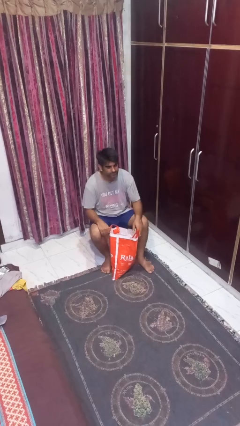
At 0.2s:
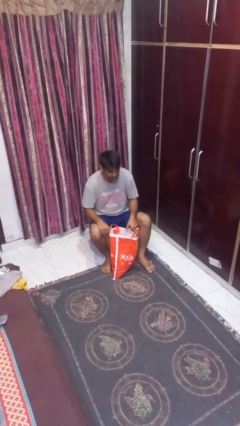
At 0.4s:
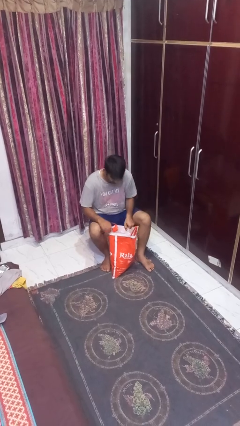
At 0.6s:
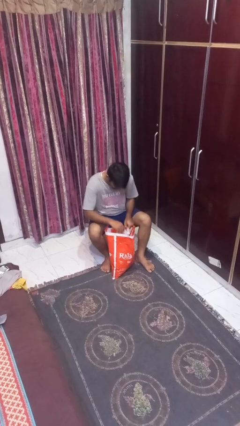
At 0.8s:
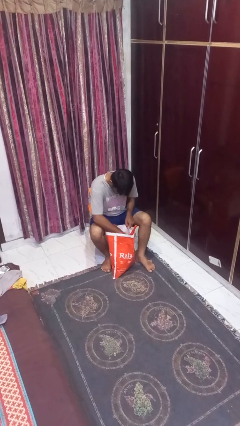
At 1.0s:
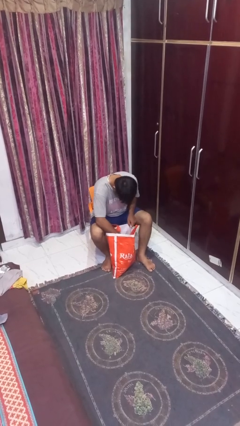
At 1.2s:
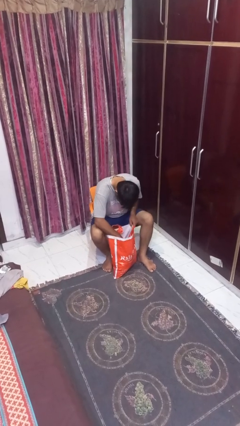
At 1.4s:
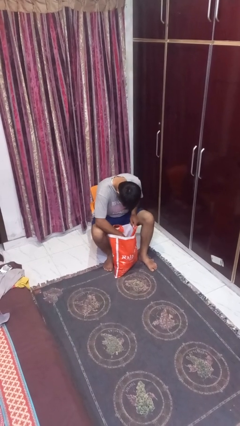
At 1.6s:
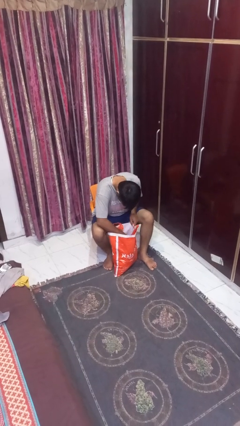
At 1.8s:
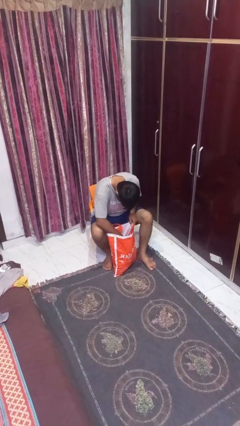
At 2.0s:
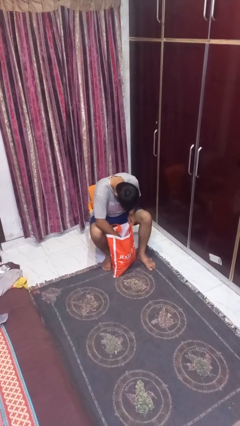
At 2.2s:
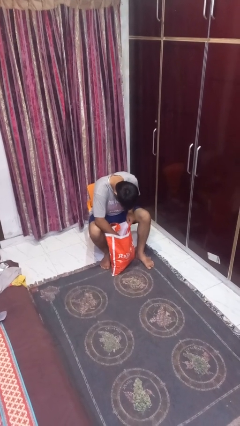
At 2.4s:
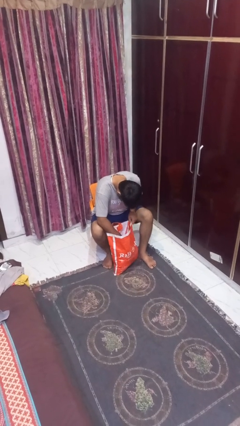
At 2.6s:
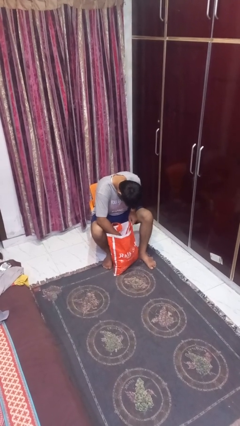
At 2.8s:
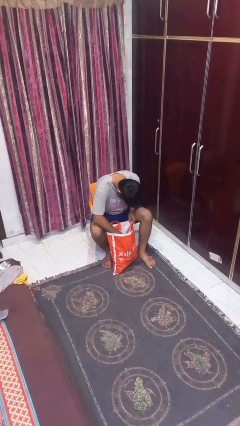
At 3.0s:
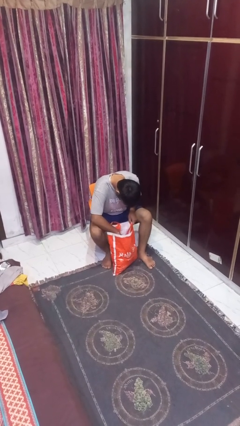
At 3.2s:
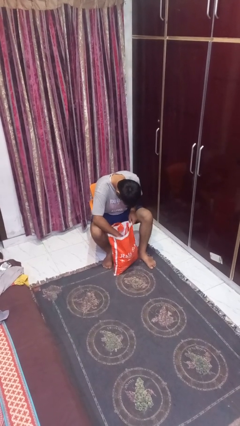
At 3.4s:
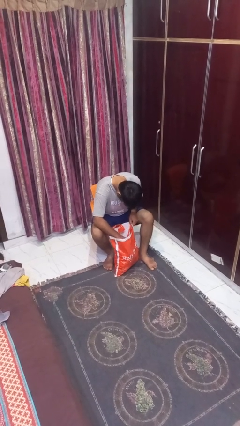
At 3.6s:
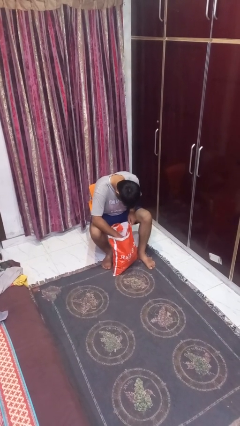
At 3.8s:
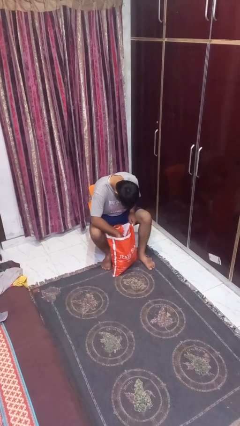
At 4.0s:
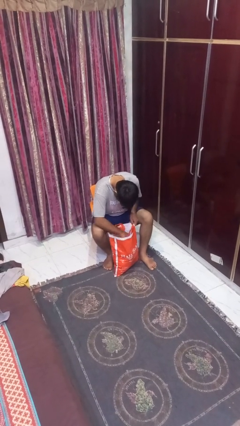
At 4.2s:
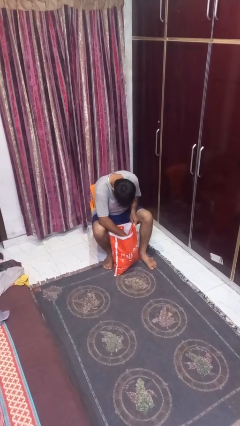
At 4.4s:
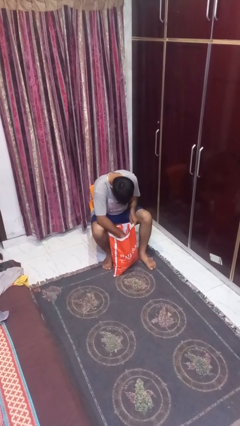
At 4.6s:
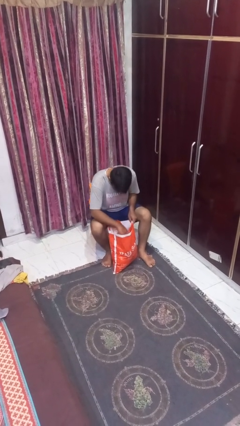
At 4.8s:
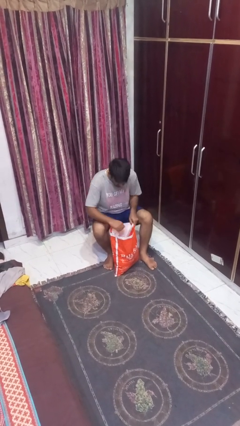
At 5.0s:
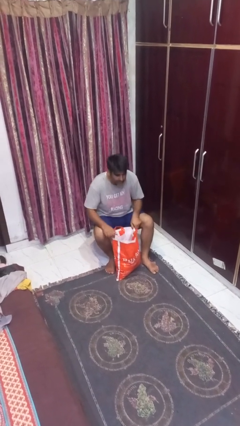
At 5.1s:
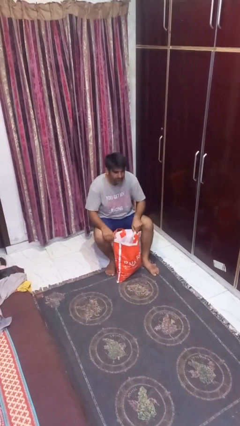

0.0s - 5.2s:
person searches in bag

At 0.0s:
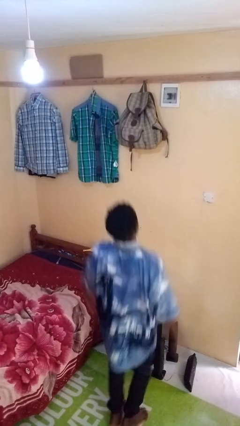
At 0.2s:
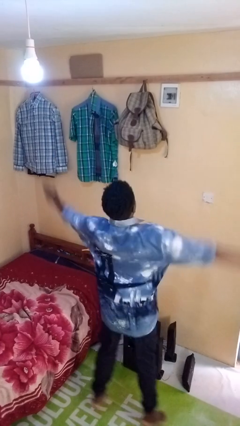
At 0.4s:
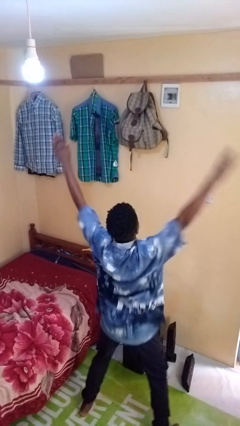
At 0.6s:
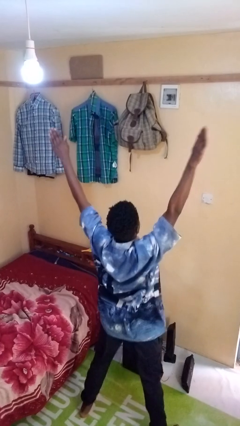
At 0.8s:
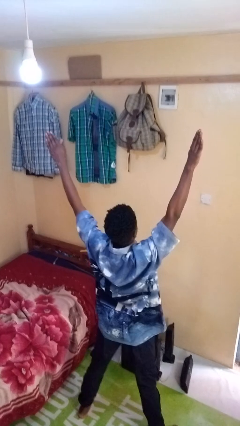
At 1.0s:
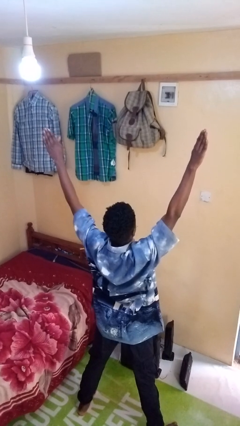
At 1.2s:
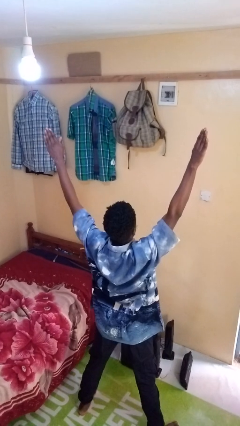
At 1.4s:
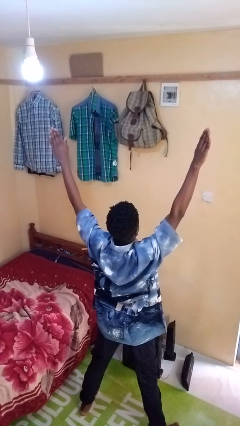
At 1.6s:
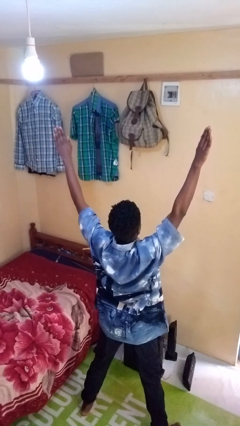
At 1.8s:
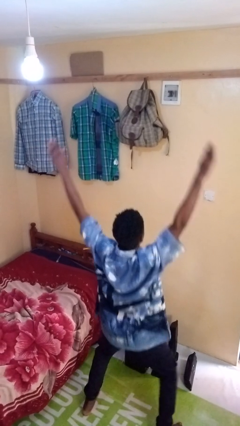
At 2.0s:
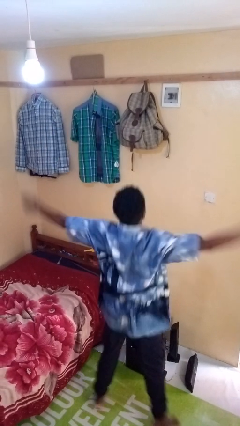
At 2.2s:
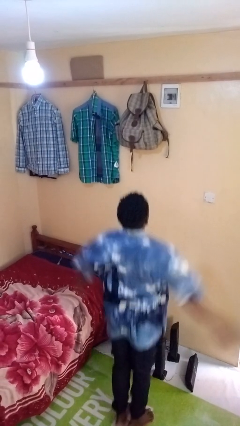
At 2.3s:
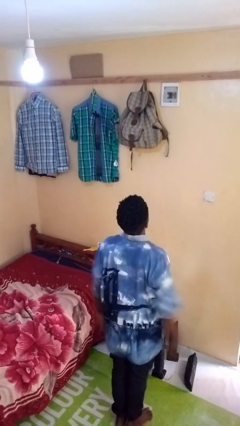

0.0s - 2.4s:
person exercises with jumping jacks

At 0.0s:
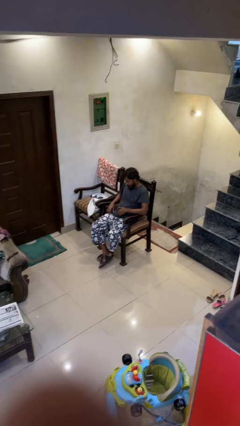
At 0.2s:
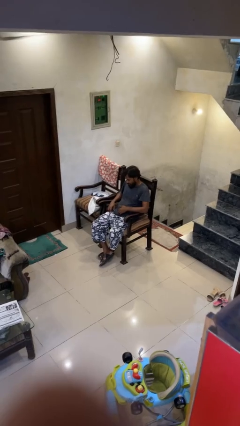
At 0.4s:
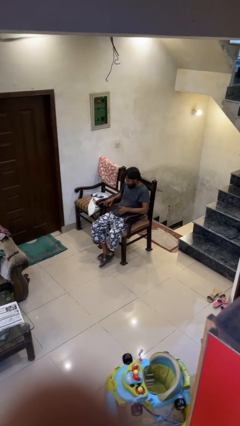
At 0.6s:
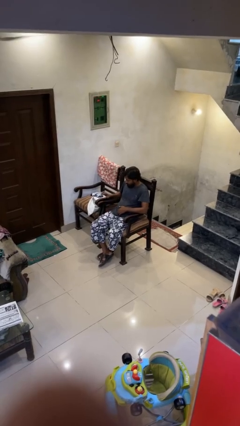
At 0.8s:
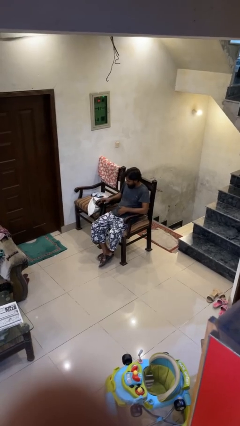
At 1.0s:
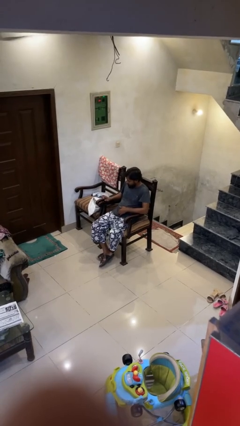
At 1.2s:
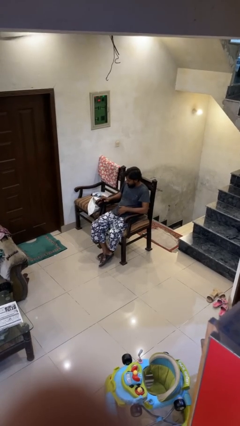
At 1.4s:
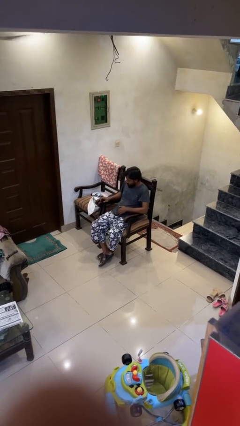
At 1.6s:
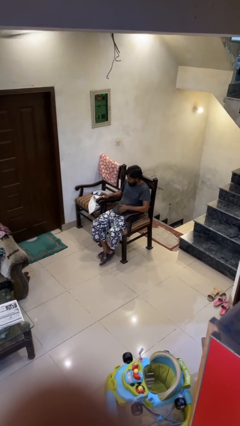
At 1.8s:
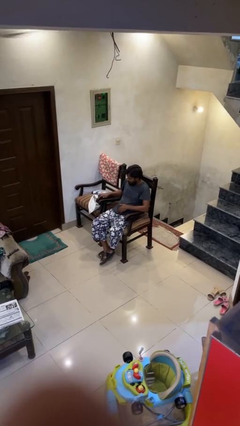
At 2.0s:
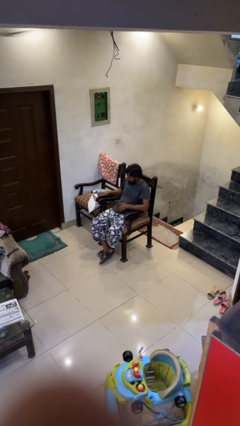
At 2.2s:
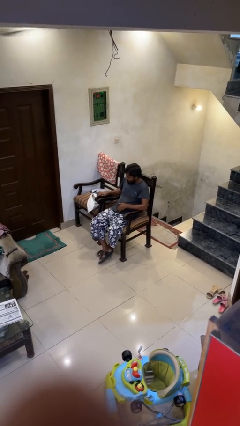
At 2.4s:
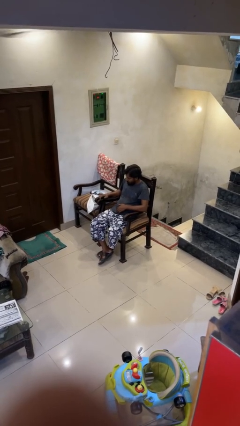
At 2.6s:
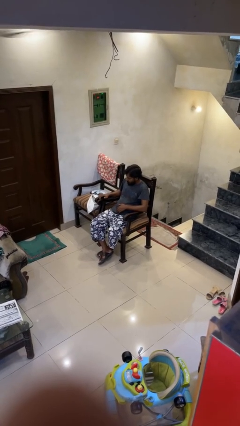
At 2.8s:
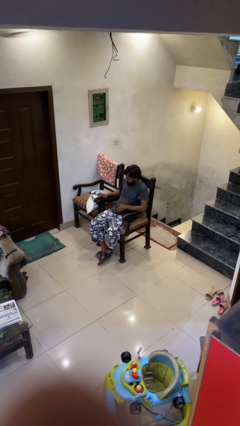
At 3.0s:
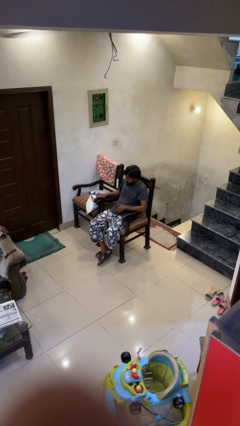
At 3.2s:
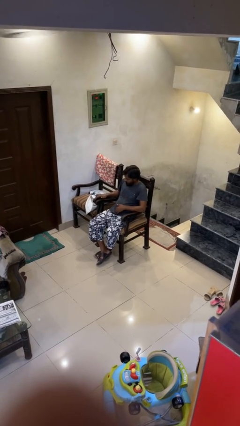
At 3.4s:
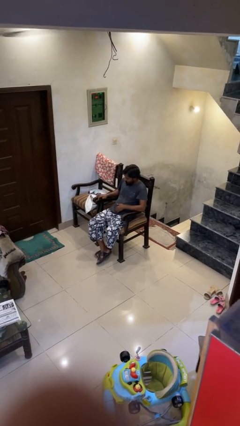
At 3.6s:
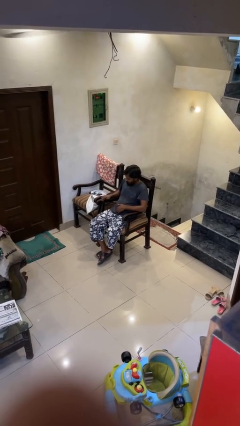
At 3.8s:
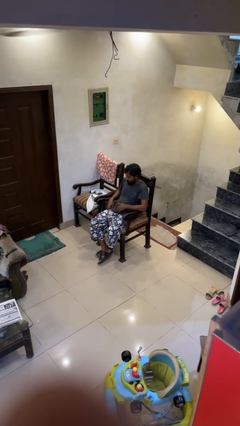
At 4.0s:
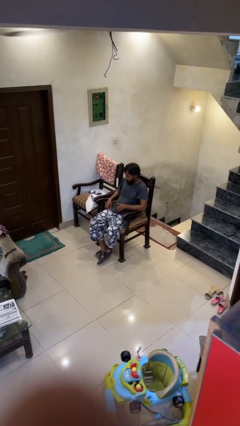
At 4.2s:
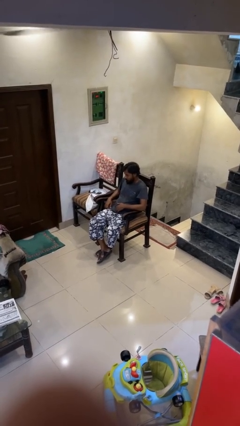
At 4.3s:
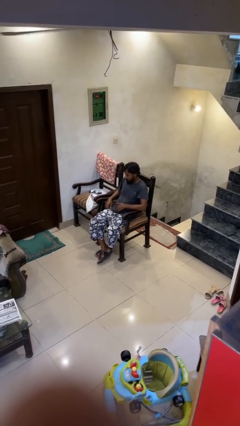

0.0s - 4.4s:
person taps object with finger

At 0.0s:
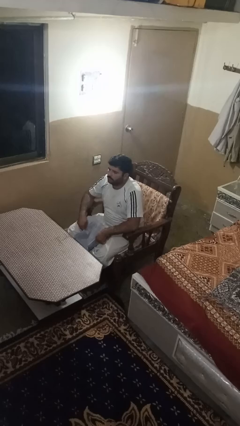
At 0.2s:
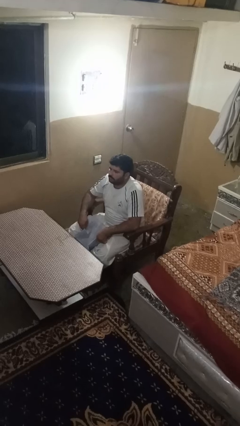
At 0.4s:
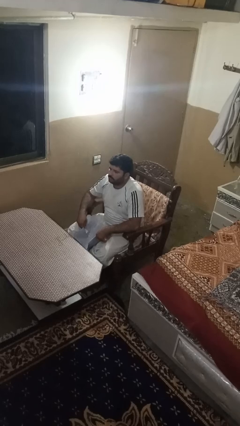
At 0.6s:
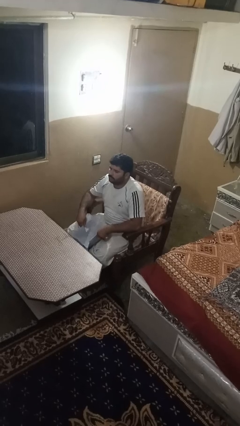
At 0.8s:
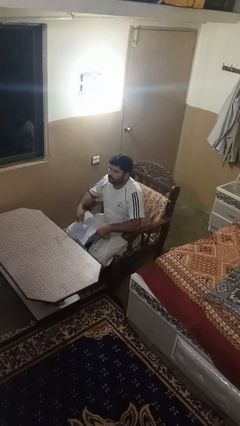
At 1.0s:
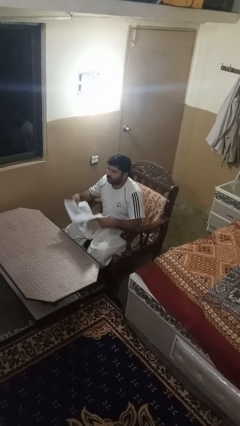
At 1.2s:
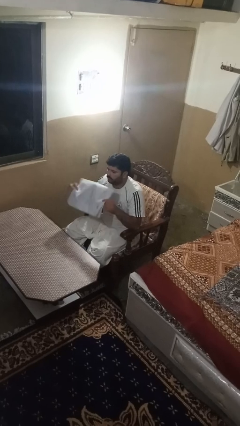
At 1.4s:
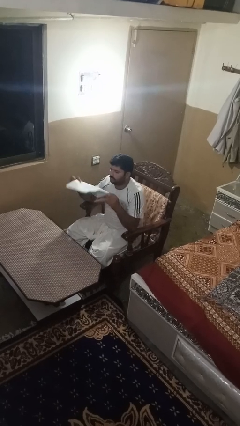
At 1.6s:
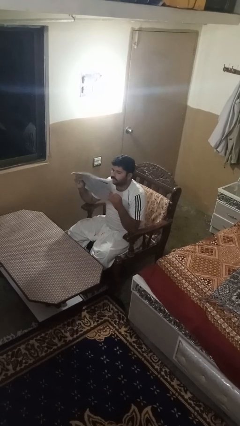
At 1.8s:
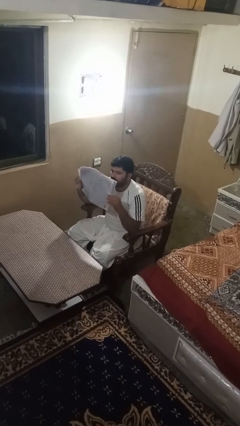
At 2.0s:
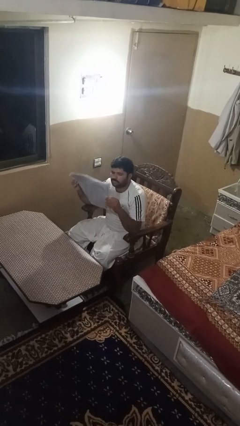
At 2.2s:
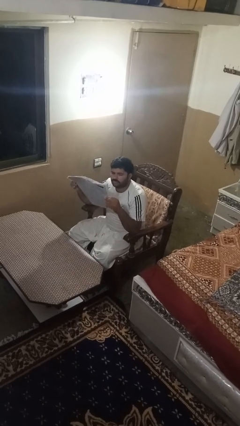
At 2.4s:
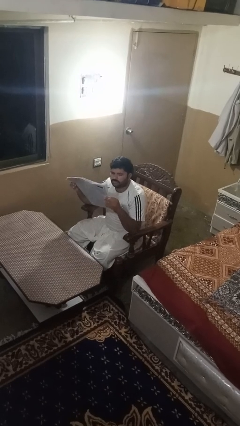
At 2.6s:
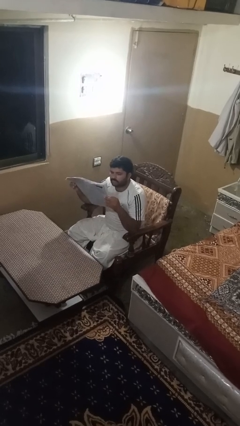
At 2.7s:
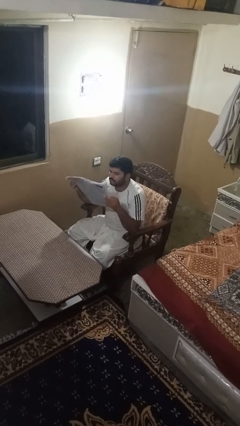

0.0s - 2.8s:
person reads newspaper

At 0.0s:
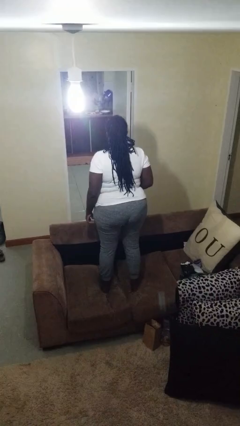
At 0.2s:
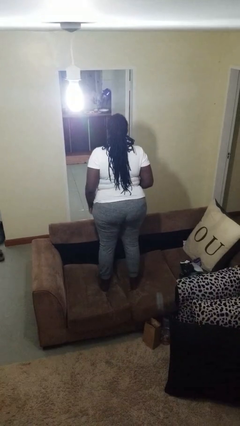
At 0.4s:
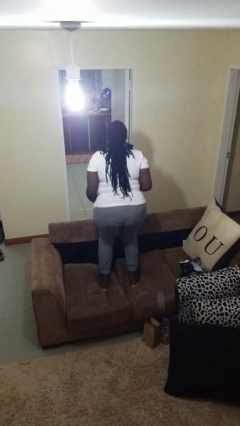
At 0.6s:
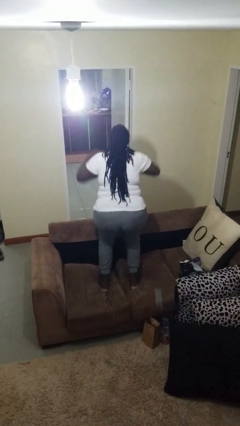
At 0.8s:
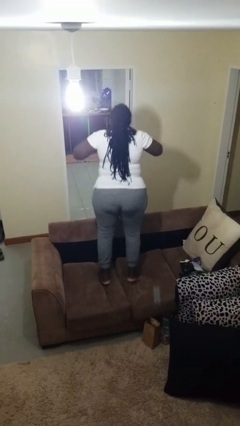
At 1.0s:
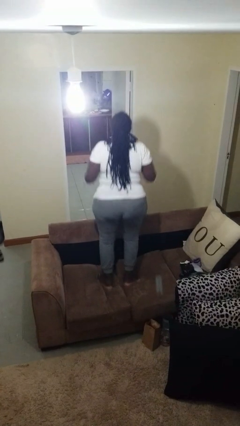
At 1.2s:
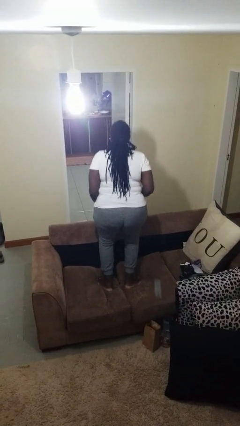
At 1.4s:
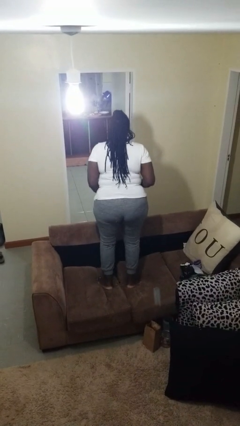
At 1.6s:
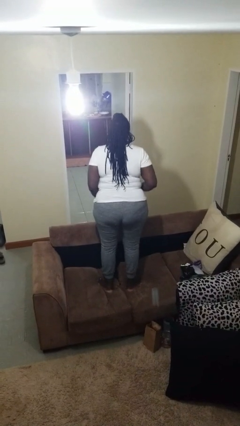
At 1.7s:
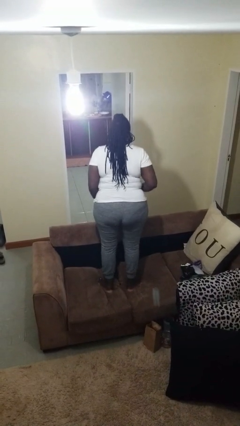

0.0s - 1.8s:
person jumps on couch

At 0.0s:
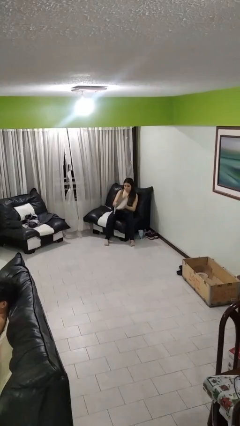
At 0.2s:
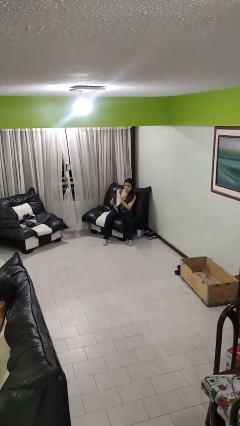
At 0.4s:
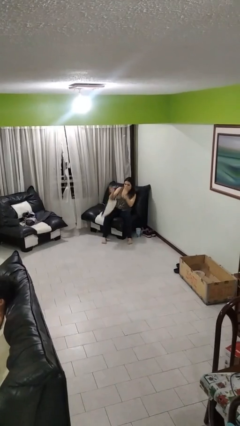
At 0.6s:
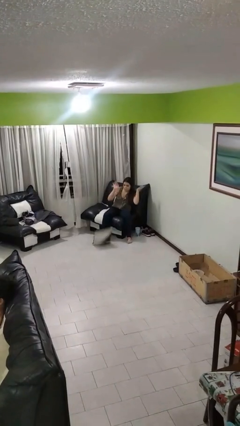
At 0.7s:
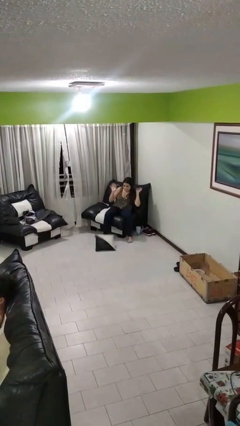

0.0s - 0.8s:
person drops object

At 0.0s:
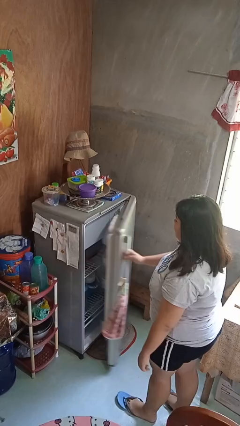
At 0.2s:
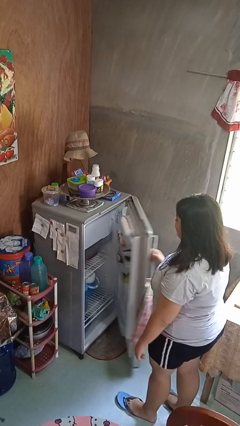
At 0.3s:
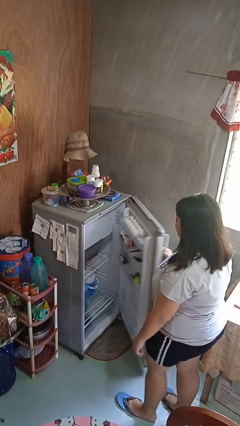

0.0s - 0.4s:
person opens refrigerator
